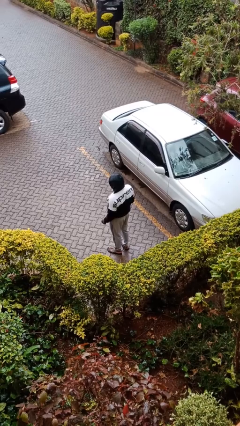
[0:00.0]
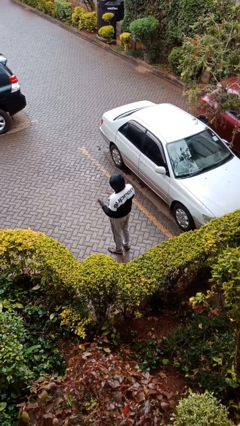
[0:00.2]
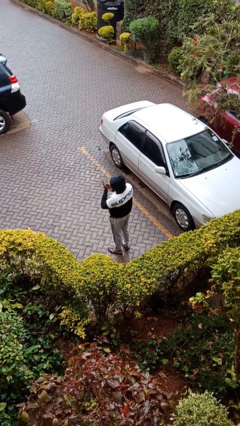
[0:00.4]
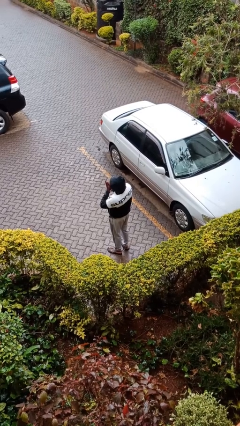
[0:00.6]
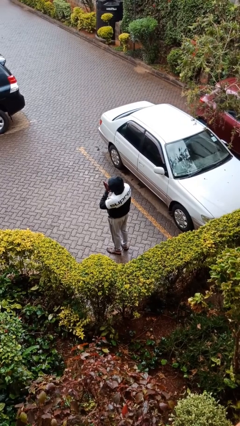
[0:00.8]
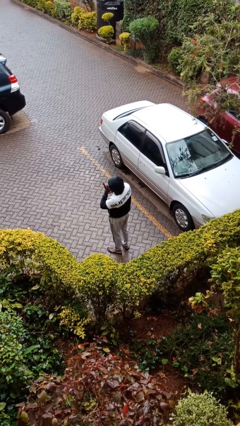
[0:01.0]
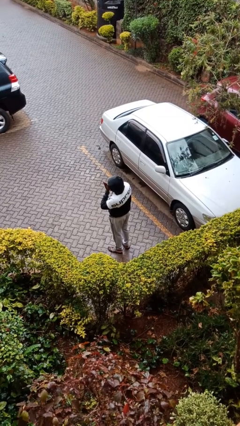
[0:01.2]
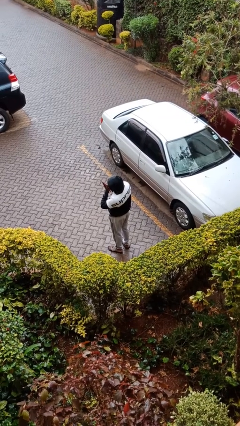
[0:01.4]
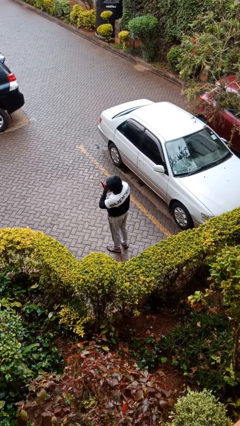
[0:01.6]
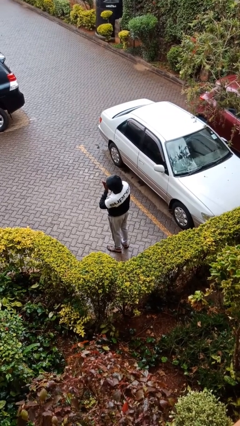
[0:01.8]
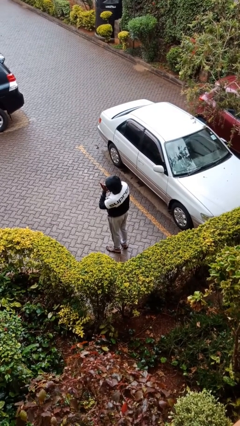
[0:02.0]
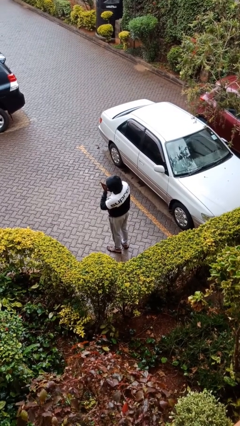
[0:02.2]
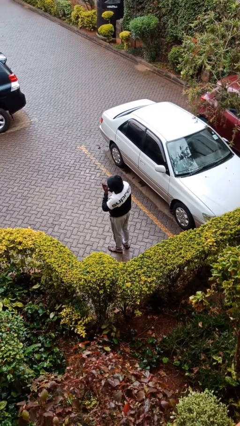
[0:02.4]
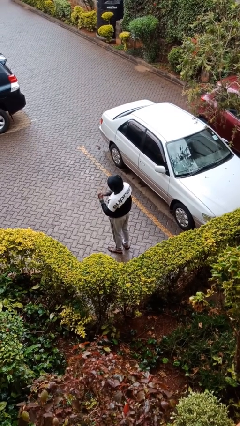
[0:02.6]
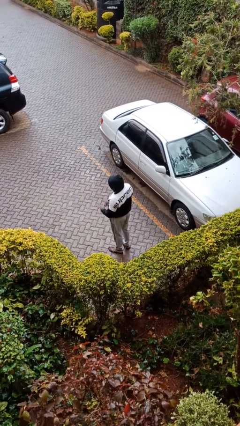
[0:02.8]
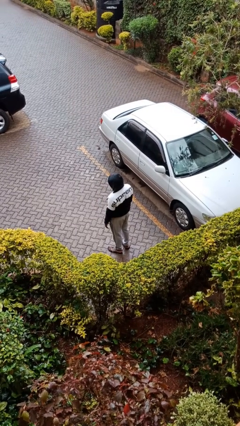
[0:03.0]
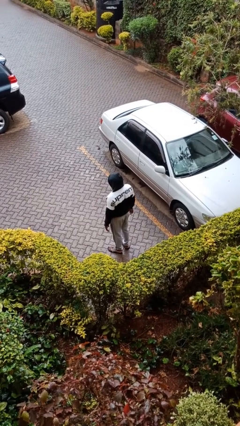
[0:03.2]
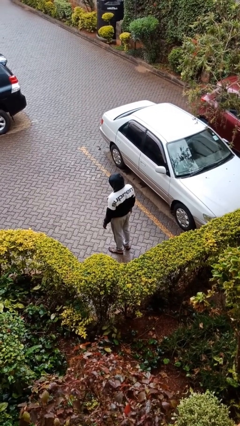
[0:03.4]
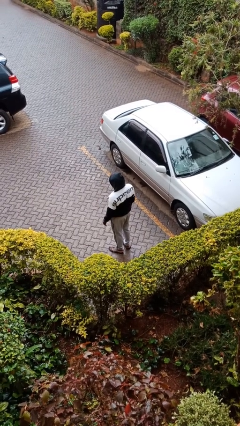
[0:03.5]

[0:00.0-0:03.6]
person blows into hands

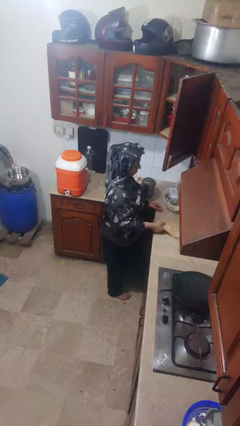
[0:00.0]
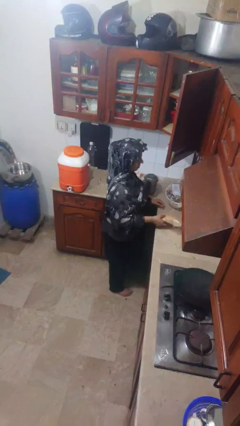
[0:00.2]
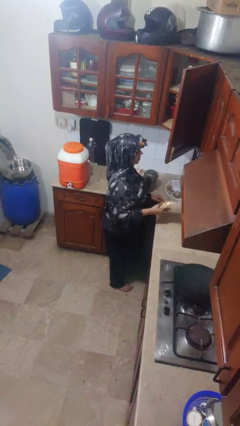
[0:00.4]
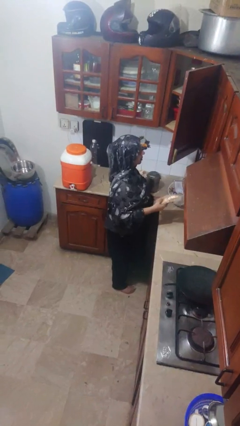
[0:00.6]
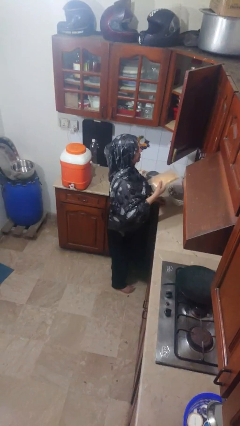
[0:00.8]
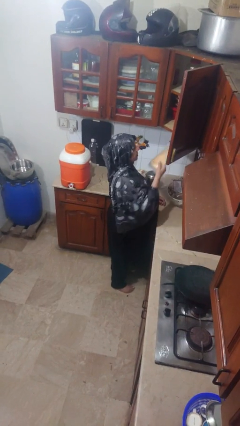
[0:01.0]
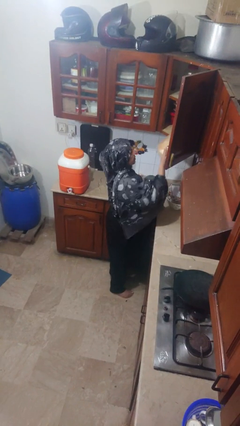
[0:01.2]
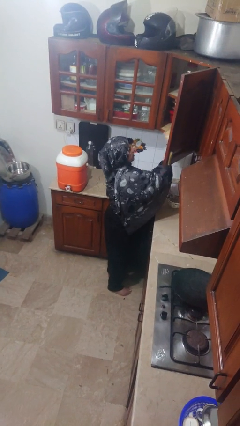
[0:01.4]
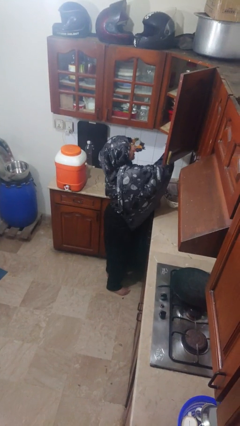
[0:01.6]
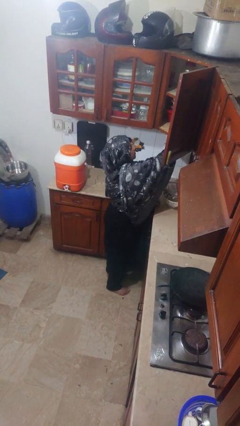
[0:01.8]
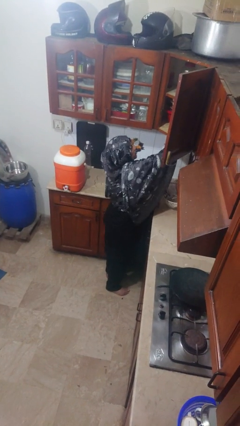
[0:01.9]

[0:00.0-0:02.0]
person loads groceries into cabinet

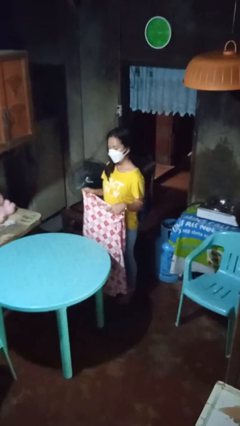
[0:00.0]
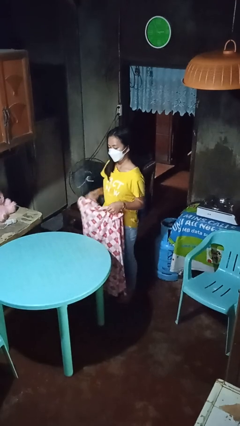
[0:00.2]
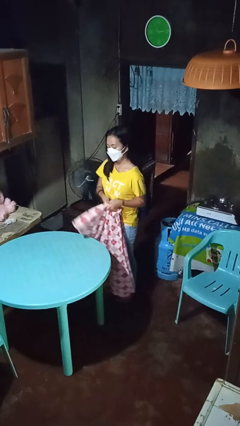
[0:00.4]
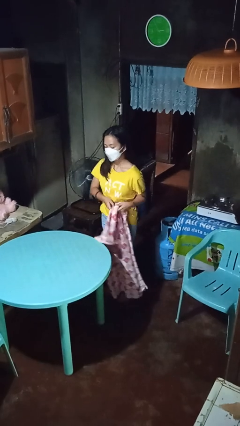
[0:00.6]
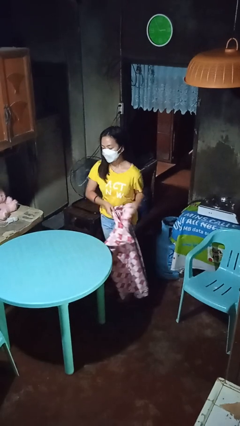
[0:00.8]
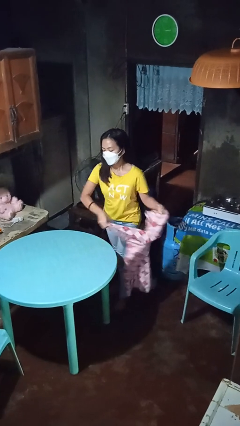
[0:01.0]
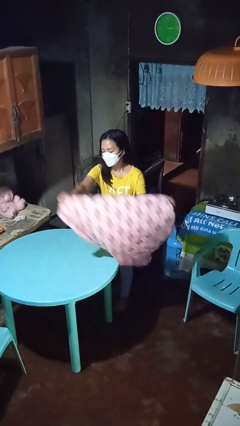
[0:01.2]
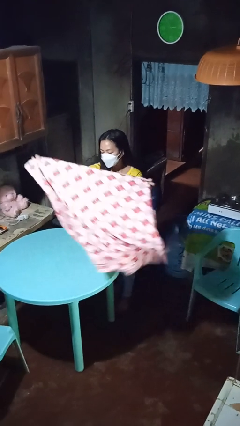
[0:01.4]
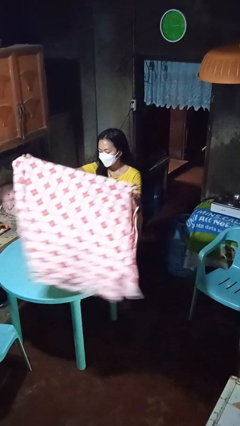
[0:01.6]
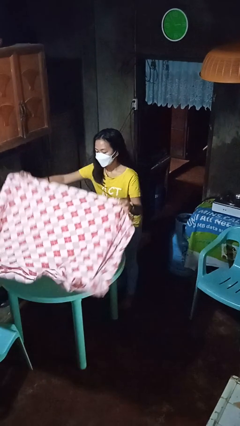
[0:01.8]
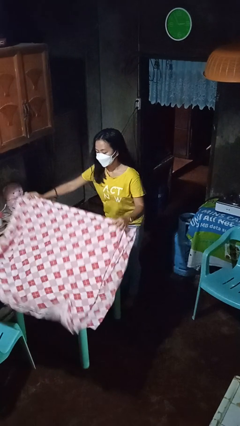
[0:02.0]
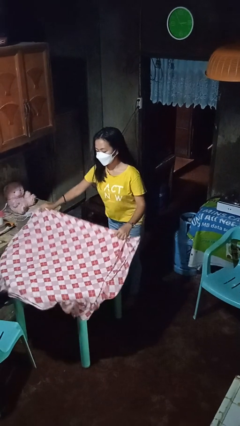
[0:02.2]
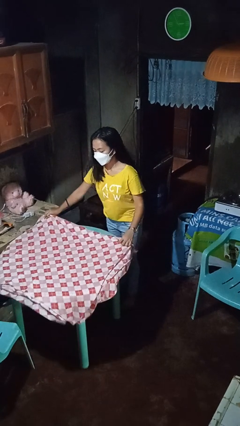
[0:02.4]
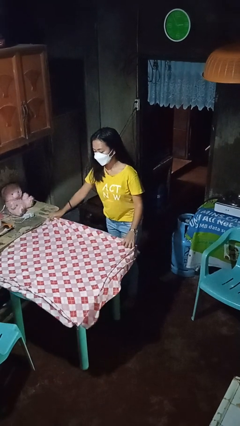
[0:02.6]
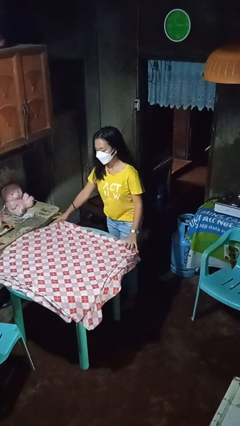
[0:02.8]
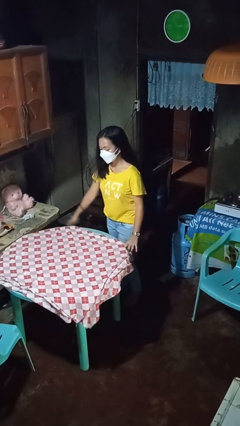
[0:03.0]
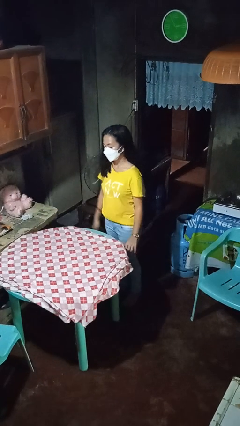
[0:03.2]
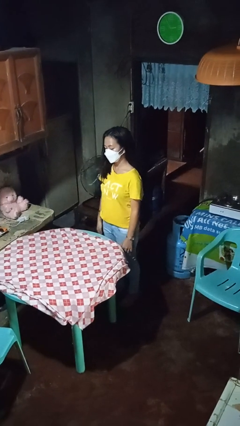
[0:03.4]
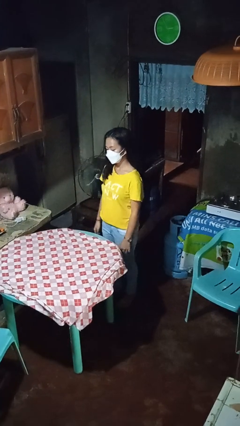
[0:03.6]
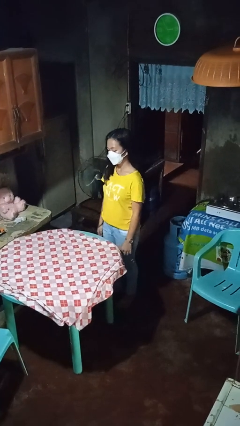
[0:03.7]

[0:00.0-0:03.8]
person spreads tablecloth

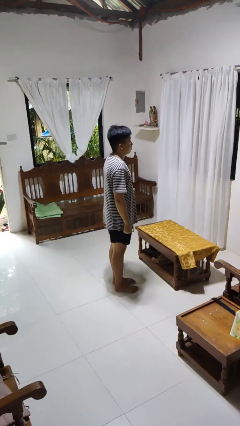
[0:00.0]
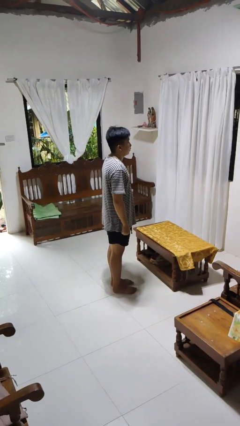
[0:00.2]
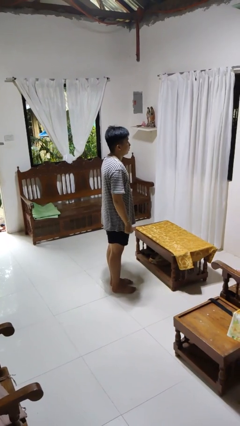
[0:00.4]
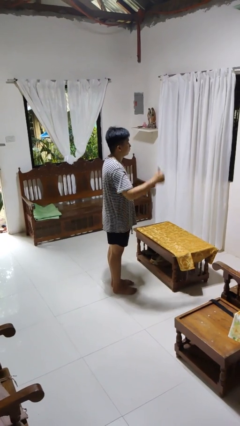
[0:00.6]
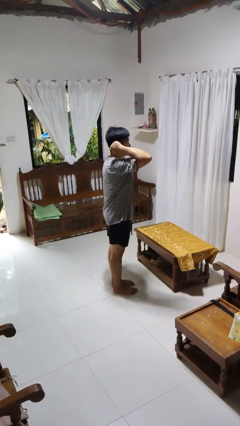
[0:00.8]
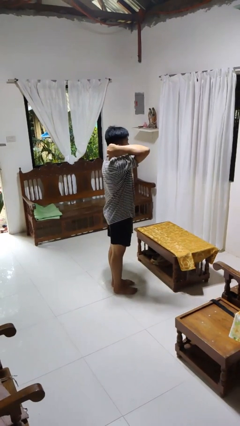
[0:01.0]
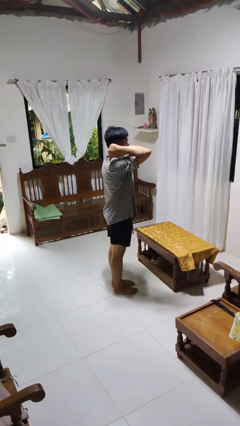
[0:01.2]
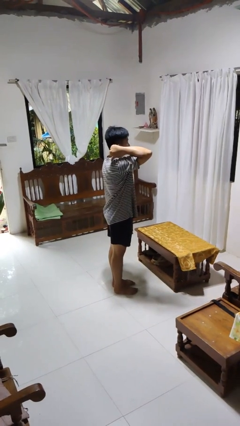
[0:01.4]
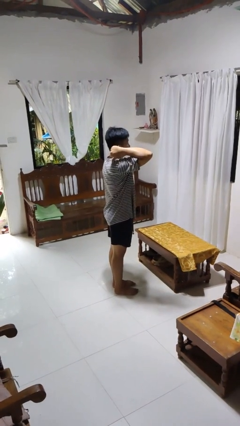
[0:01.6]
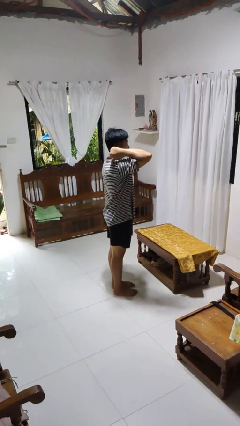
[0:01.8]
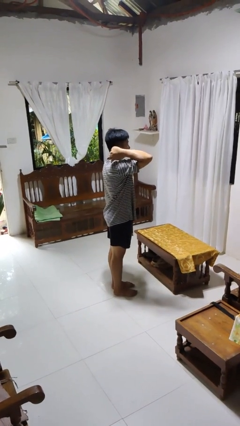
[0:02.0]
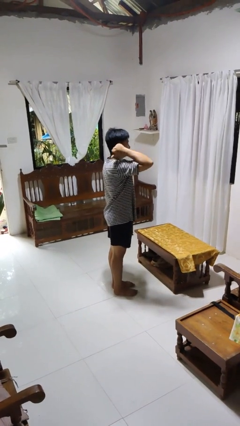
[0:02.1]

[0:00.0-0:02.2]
person gestures behind me

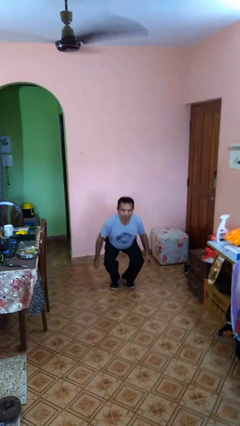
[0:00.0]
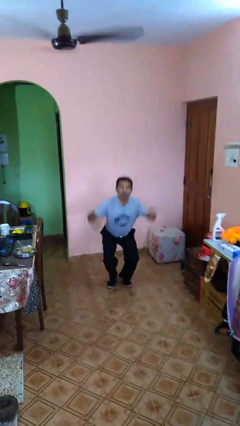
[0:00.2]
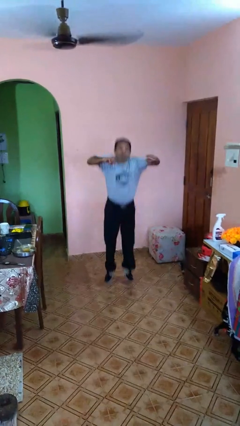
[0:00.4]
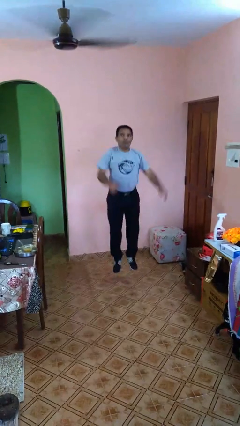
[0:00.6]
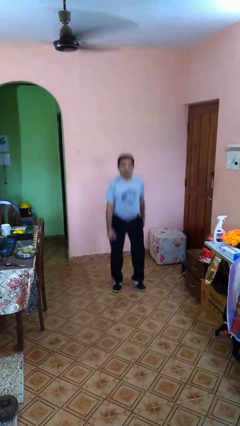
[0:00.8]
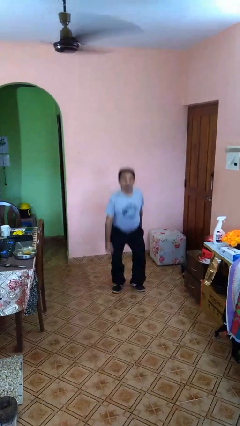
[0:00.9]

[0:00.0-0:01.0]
person jumps

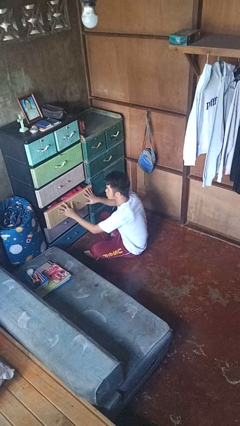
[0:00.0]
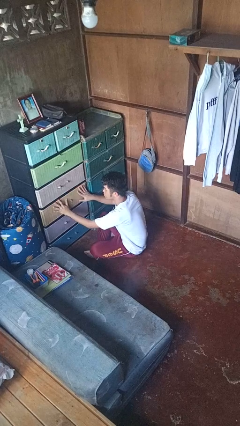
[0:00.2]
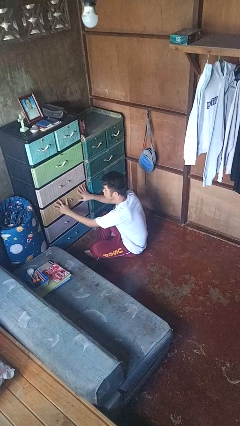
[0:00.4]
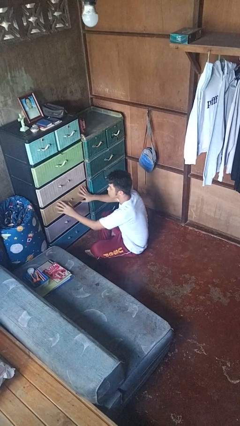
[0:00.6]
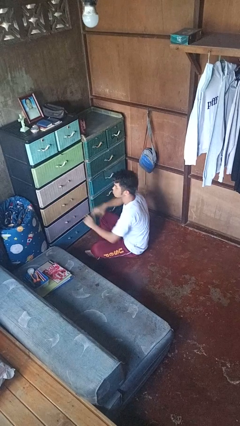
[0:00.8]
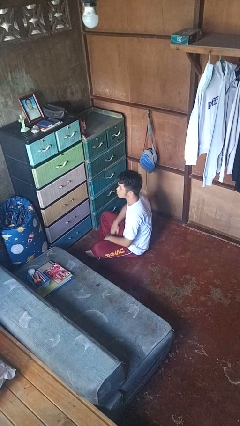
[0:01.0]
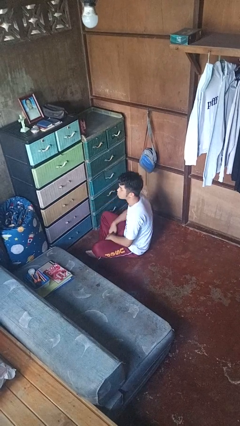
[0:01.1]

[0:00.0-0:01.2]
person closes dresser drawer

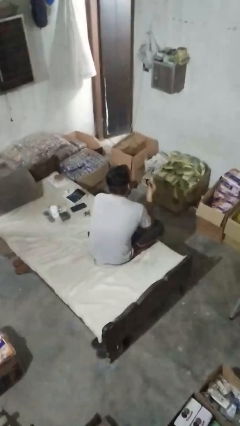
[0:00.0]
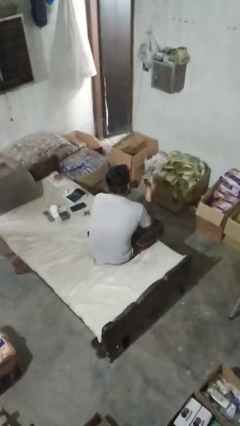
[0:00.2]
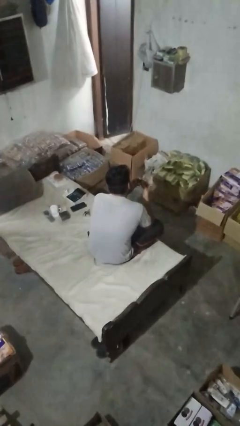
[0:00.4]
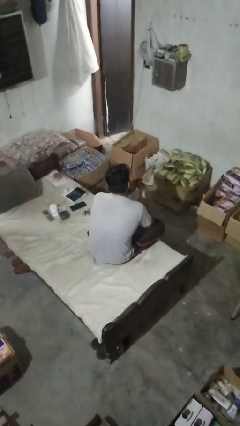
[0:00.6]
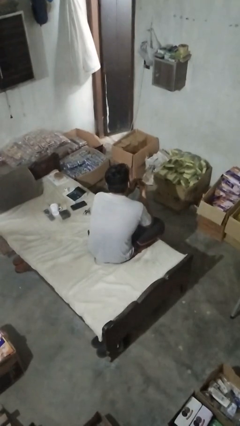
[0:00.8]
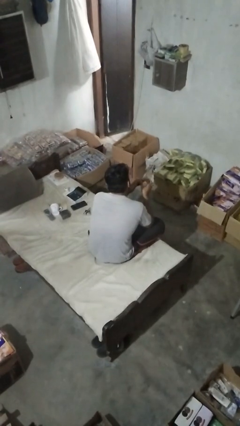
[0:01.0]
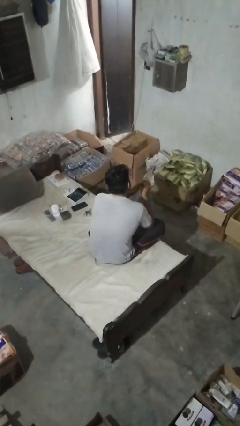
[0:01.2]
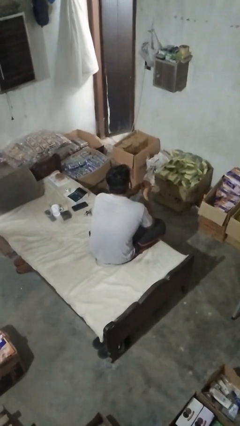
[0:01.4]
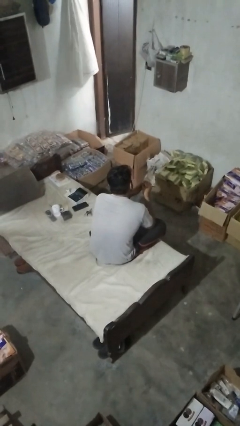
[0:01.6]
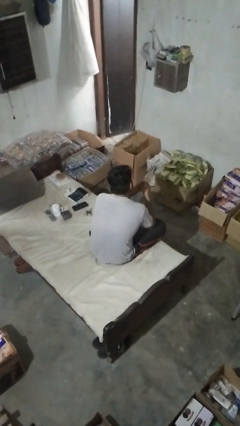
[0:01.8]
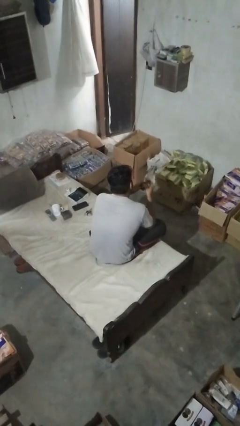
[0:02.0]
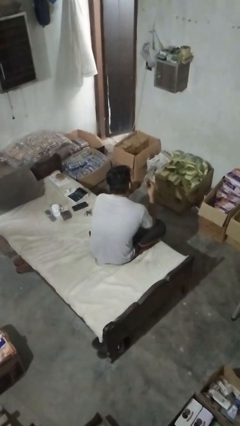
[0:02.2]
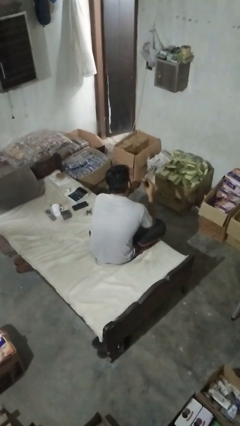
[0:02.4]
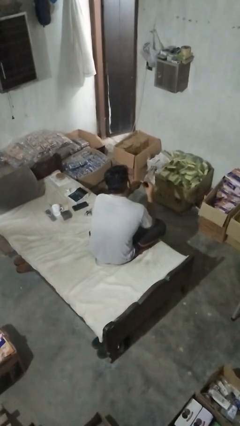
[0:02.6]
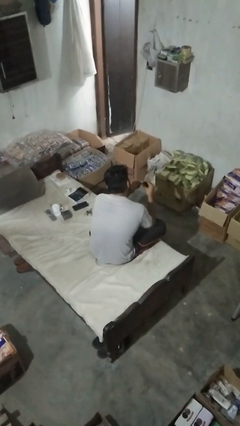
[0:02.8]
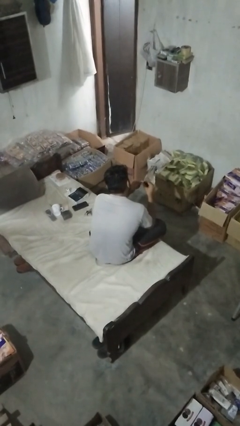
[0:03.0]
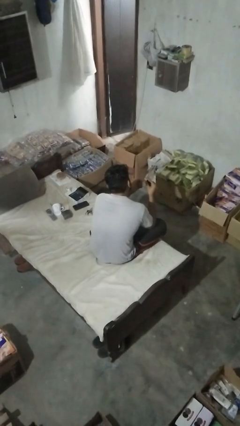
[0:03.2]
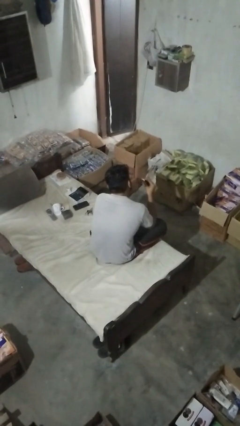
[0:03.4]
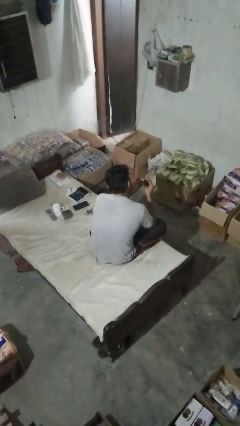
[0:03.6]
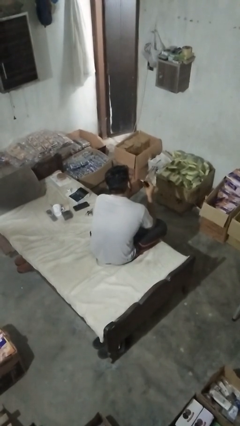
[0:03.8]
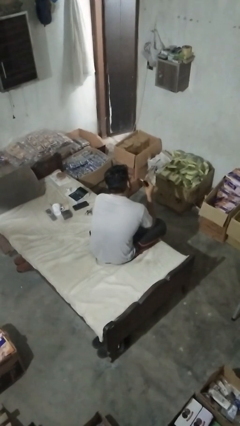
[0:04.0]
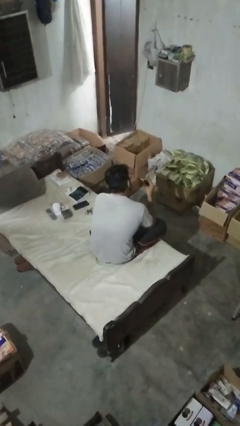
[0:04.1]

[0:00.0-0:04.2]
person paints fingernails
